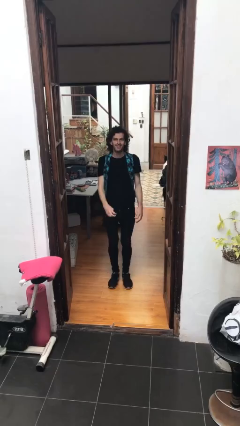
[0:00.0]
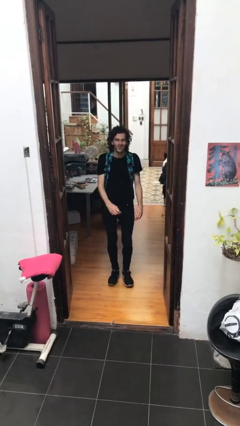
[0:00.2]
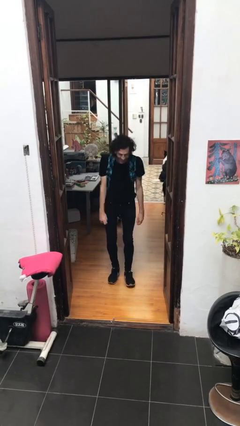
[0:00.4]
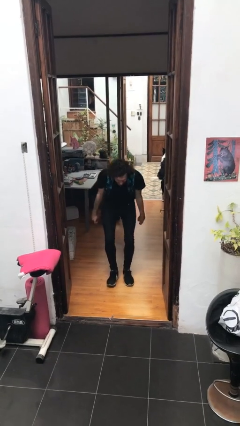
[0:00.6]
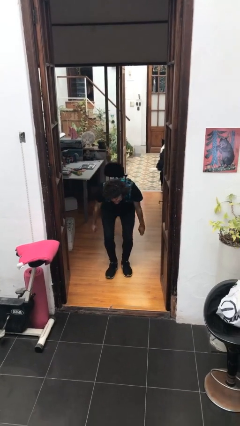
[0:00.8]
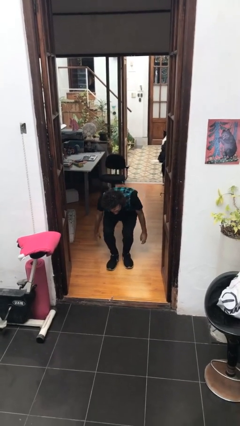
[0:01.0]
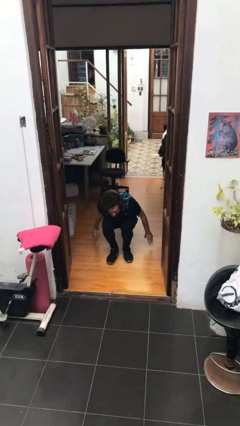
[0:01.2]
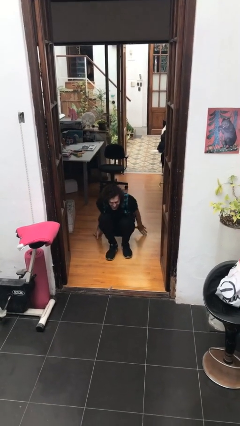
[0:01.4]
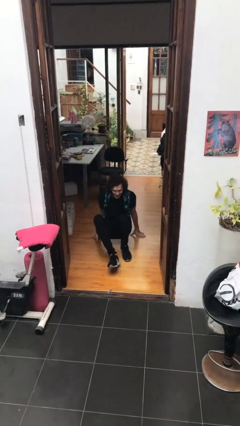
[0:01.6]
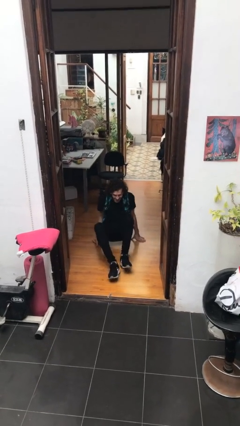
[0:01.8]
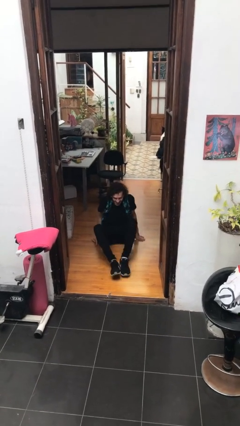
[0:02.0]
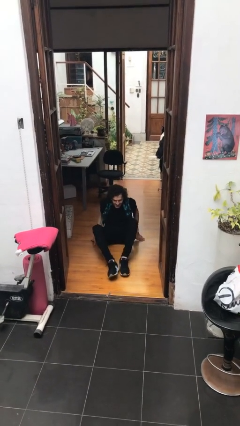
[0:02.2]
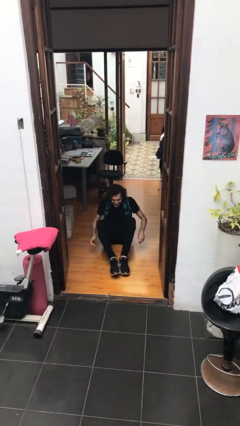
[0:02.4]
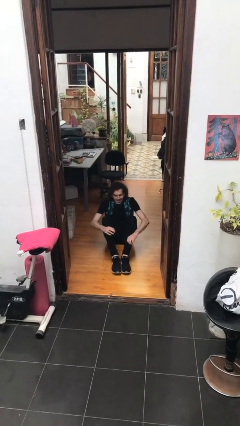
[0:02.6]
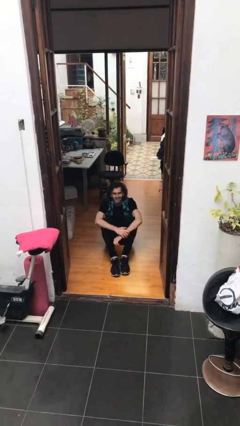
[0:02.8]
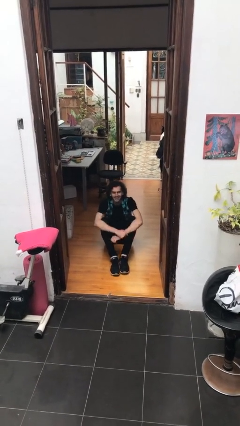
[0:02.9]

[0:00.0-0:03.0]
person sits down

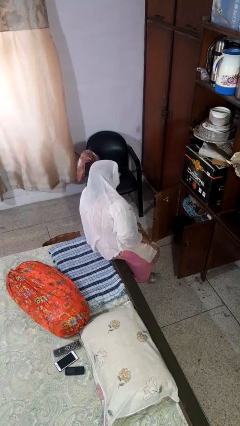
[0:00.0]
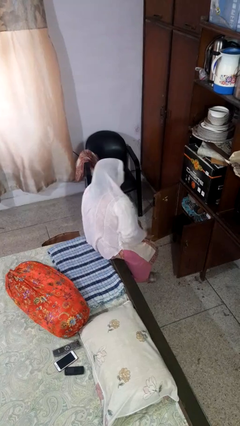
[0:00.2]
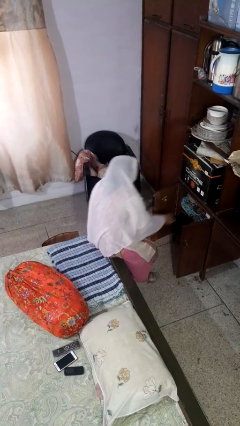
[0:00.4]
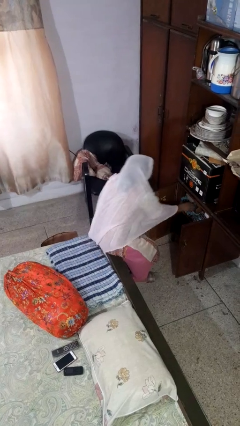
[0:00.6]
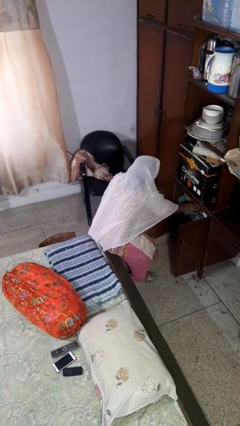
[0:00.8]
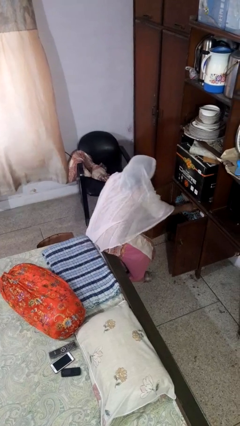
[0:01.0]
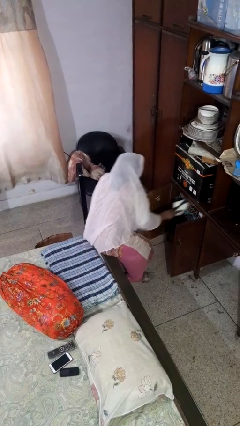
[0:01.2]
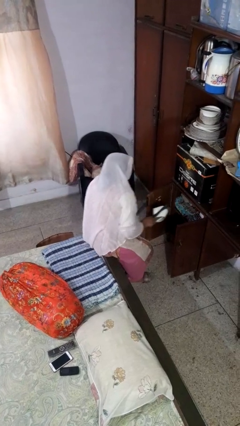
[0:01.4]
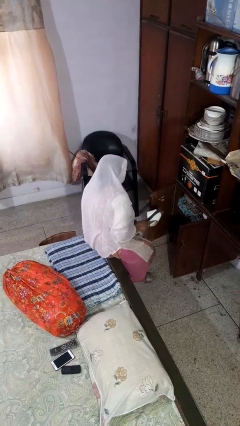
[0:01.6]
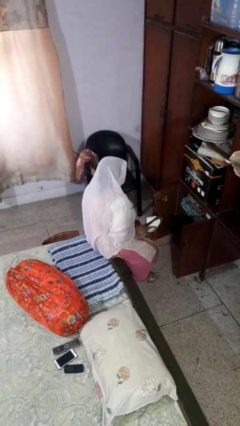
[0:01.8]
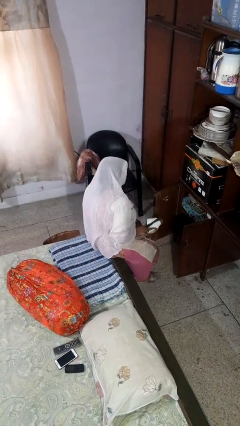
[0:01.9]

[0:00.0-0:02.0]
person takes object from cabinet

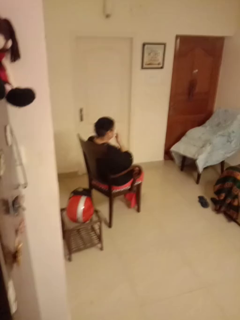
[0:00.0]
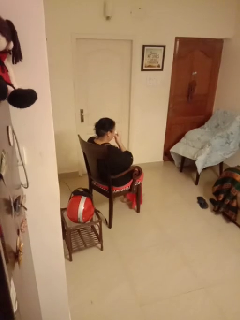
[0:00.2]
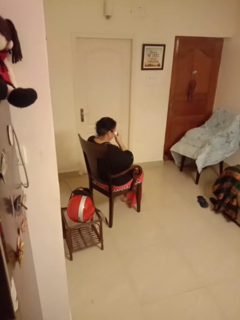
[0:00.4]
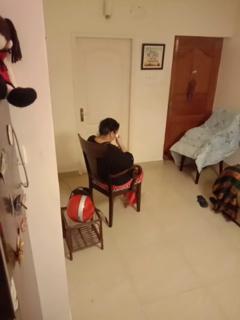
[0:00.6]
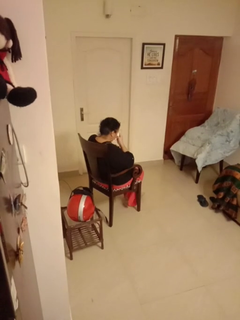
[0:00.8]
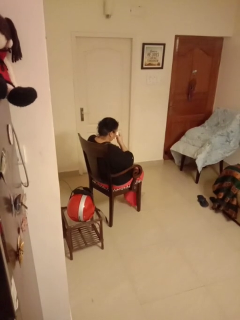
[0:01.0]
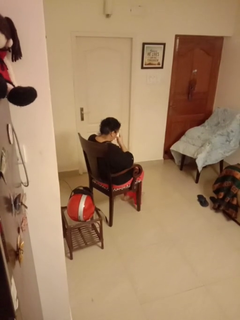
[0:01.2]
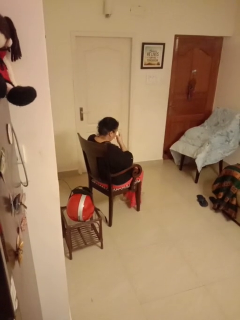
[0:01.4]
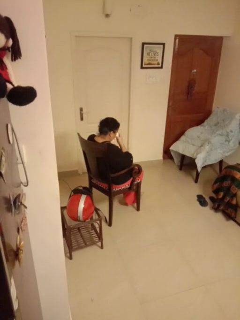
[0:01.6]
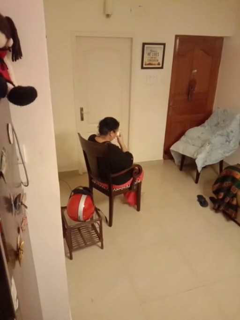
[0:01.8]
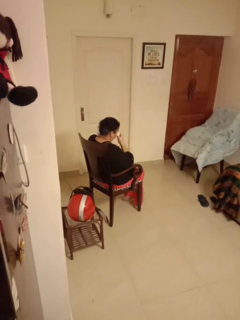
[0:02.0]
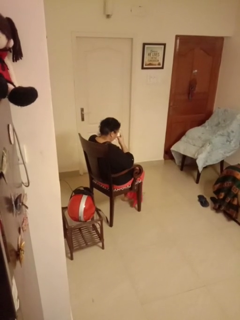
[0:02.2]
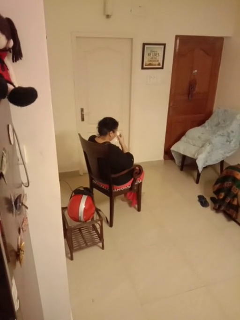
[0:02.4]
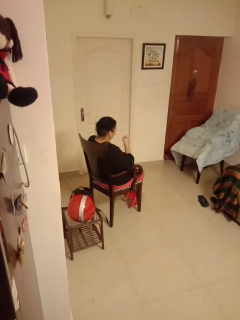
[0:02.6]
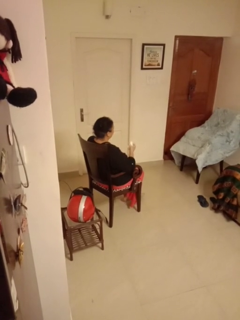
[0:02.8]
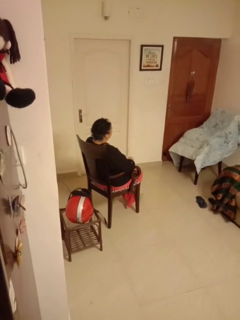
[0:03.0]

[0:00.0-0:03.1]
person blows nose

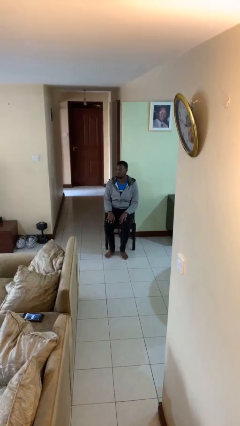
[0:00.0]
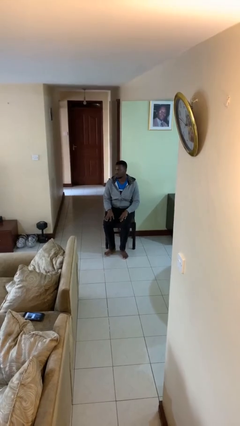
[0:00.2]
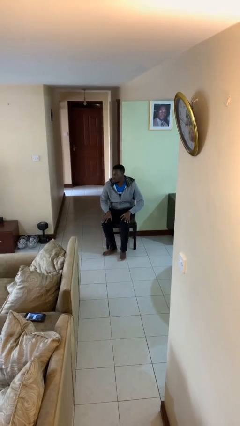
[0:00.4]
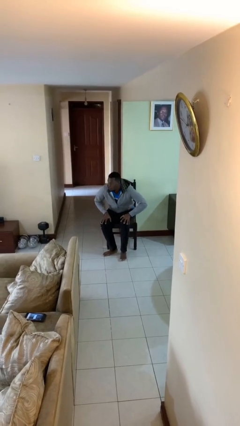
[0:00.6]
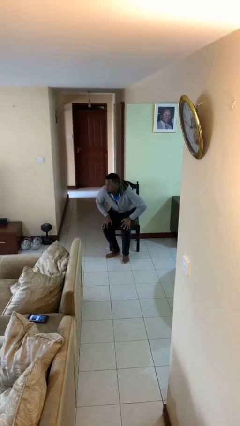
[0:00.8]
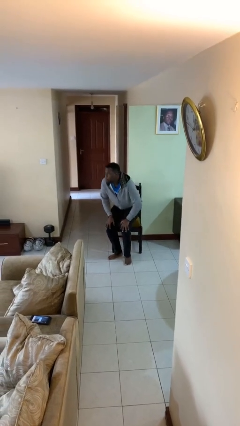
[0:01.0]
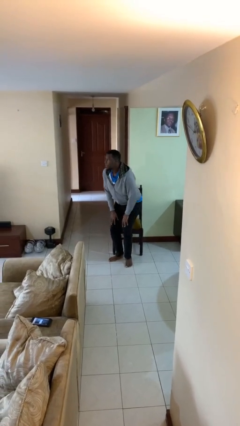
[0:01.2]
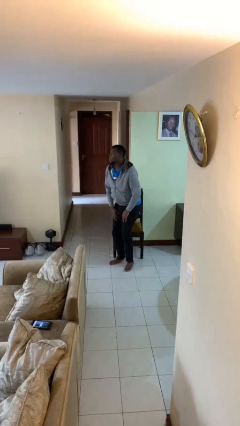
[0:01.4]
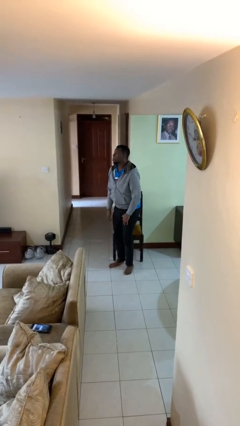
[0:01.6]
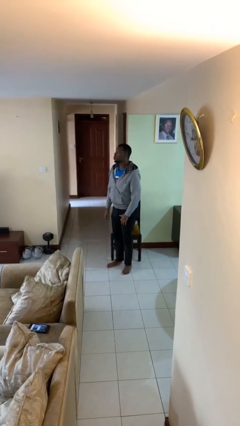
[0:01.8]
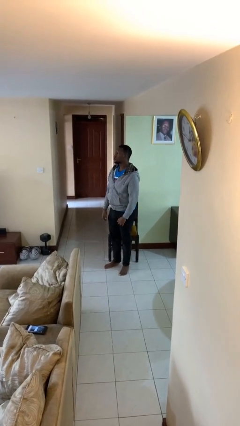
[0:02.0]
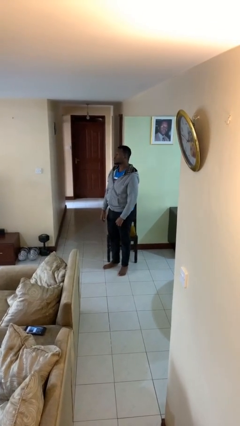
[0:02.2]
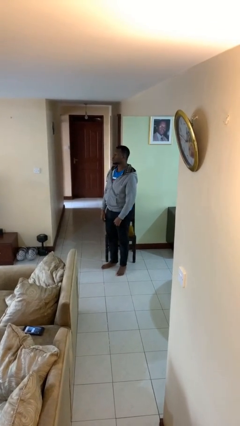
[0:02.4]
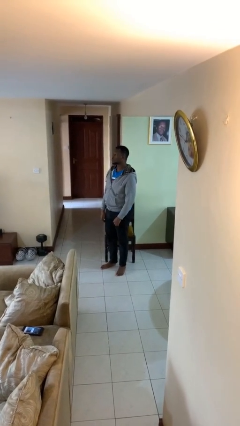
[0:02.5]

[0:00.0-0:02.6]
person stands up

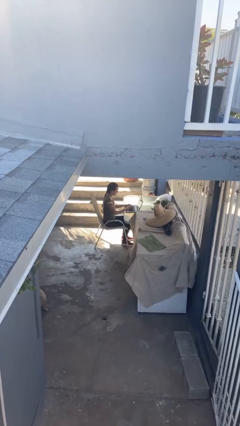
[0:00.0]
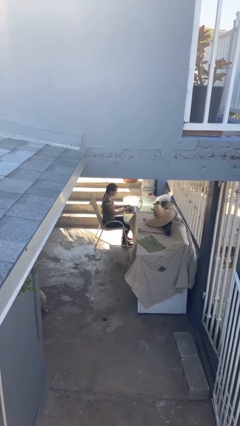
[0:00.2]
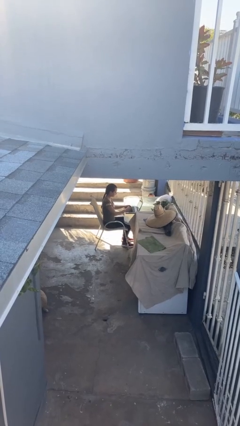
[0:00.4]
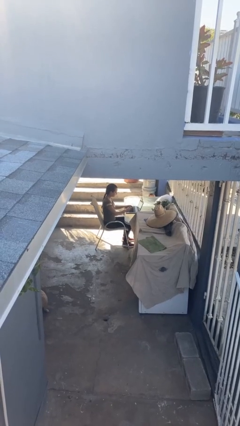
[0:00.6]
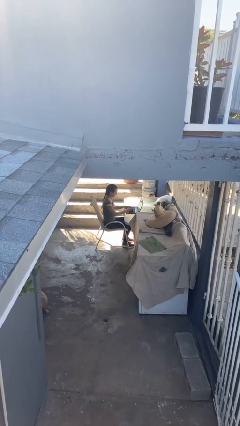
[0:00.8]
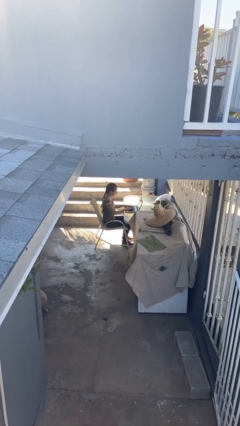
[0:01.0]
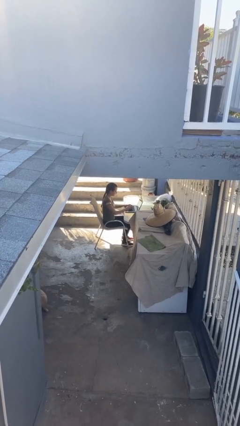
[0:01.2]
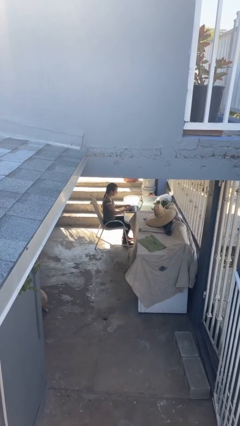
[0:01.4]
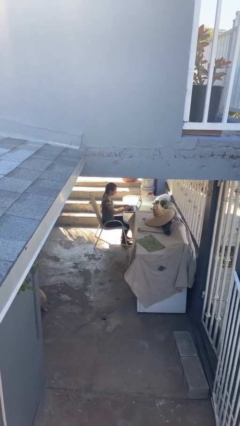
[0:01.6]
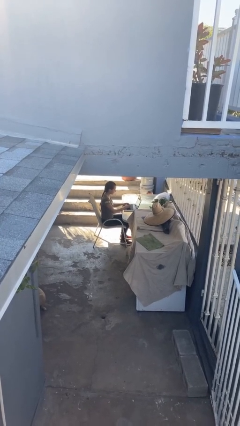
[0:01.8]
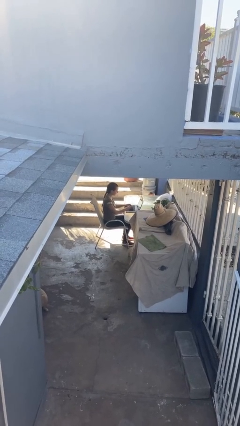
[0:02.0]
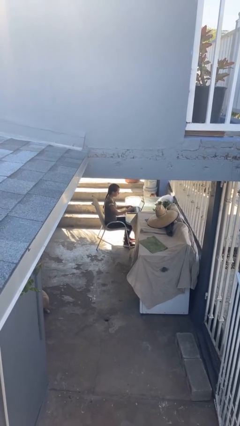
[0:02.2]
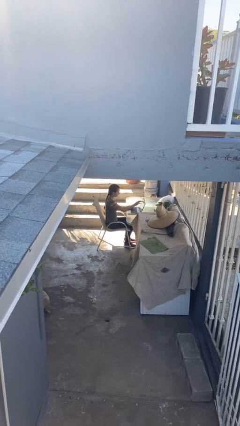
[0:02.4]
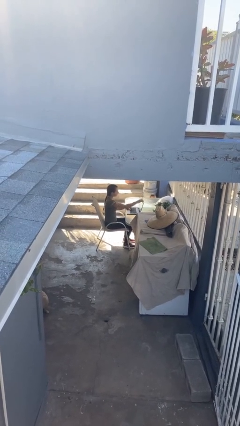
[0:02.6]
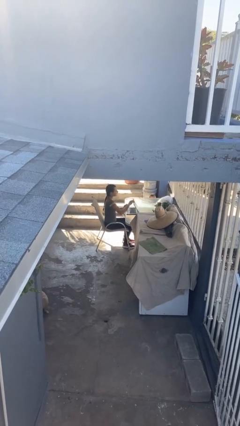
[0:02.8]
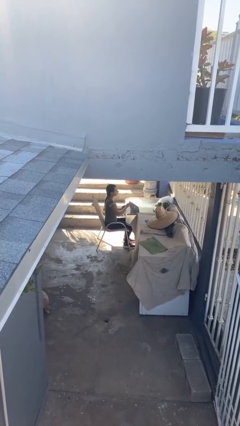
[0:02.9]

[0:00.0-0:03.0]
person interacts with laptop

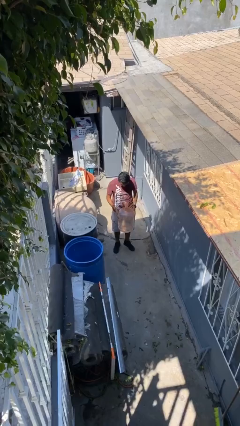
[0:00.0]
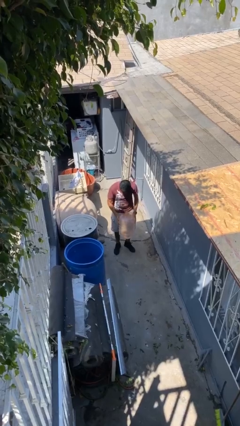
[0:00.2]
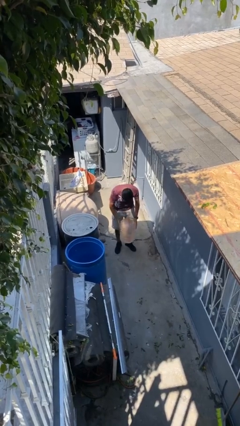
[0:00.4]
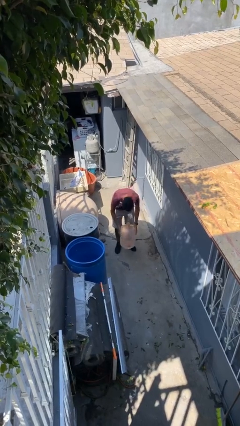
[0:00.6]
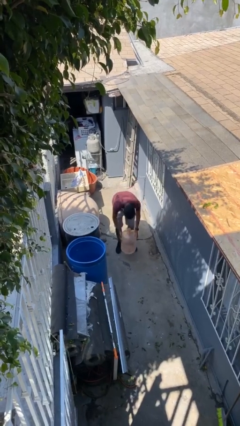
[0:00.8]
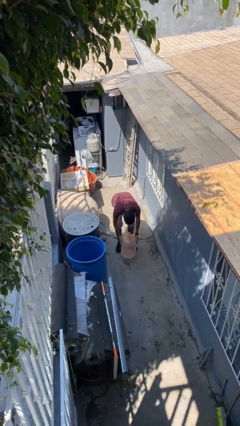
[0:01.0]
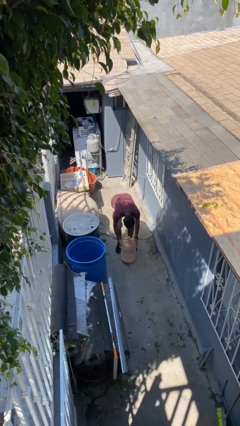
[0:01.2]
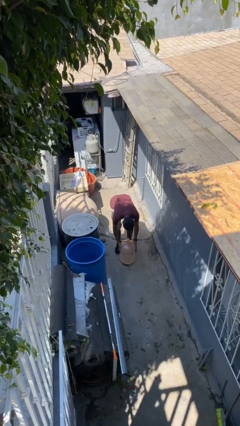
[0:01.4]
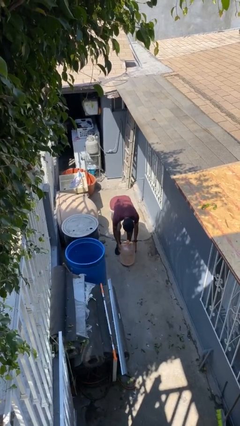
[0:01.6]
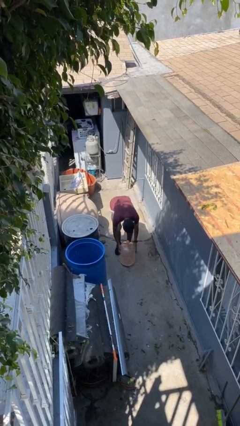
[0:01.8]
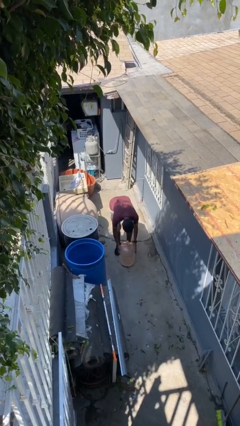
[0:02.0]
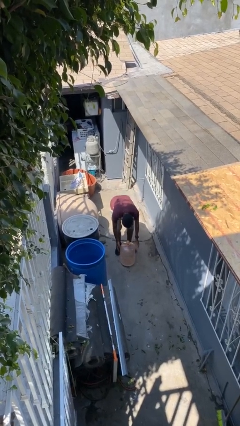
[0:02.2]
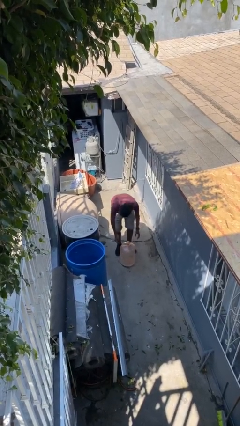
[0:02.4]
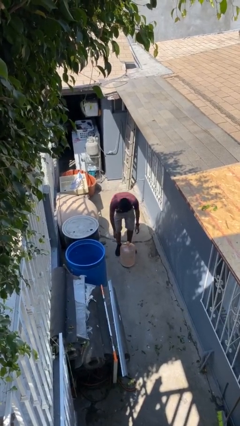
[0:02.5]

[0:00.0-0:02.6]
person puts down object on floor

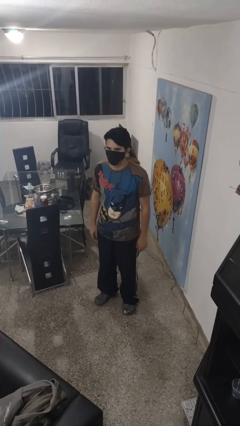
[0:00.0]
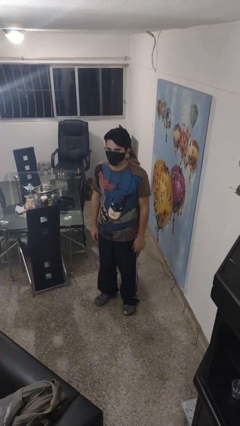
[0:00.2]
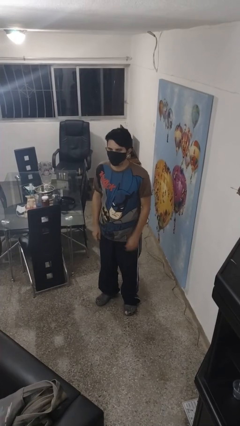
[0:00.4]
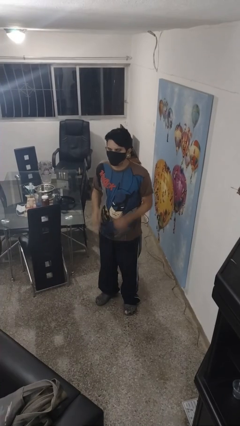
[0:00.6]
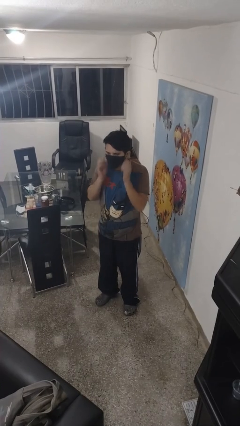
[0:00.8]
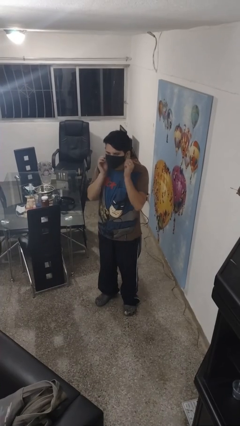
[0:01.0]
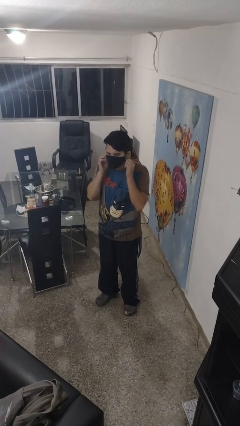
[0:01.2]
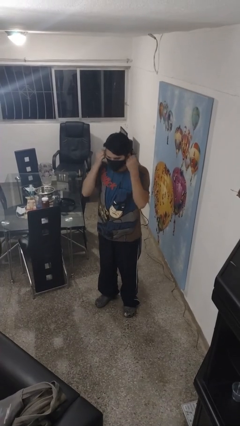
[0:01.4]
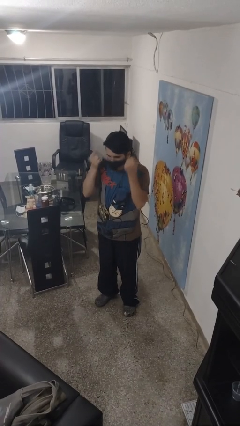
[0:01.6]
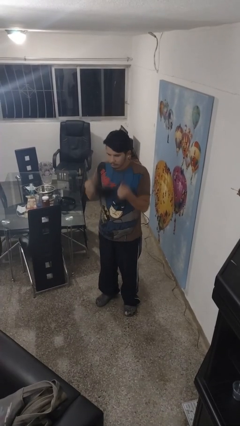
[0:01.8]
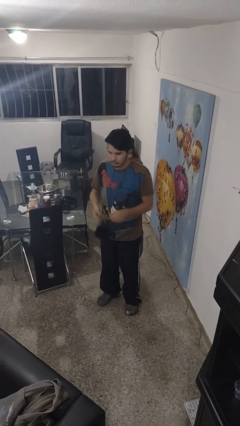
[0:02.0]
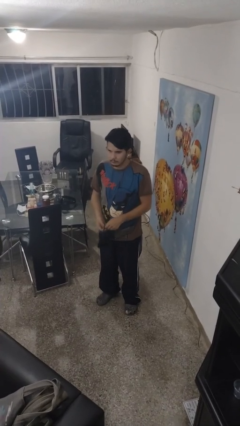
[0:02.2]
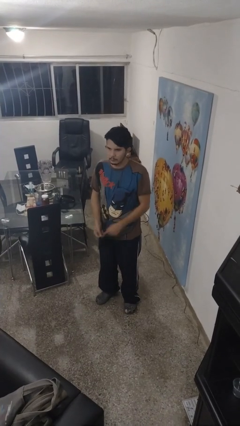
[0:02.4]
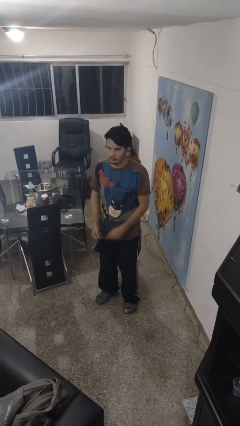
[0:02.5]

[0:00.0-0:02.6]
person takes off facemask
